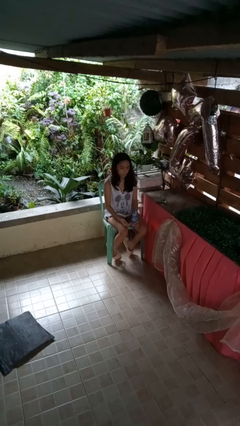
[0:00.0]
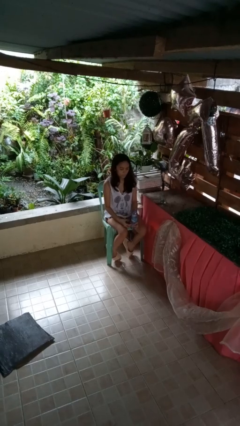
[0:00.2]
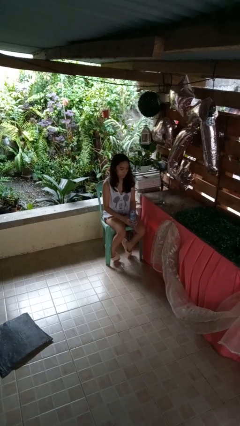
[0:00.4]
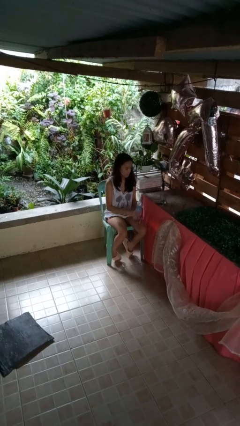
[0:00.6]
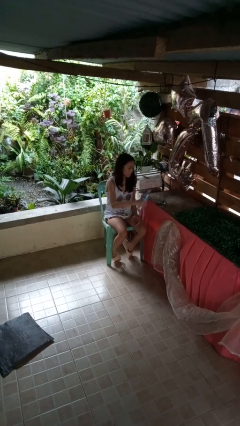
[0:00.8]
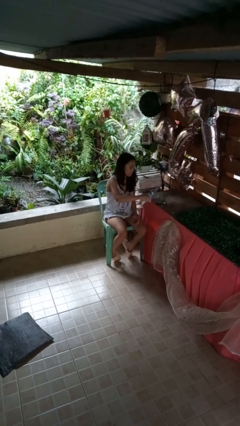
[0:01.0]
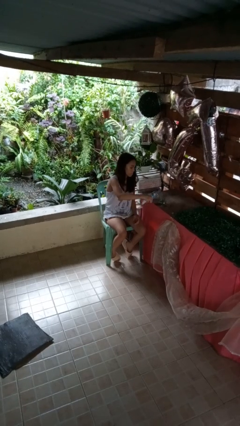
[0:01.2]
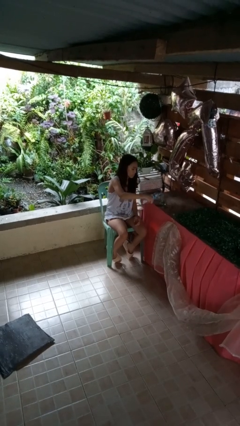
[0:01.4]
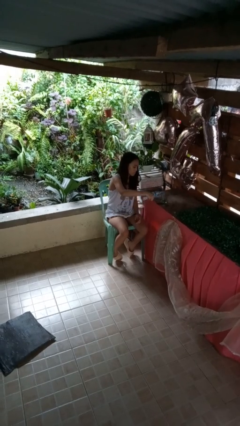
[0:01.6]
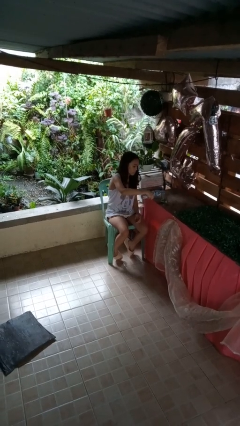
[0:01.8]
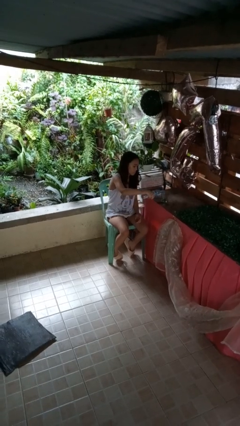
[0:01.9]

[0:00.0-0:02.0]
person pours liquid into cup

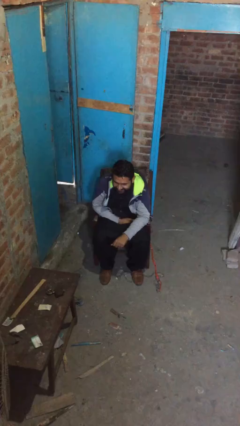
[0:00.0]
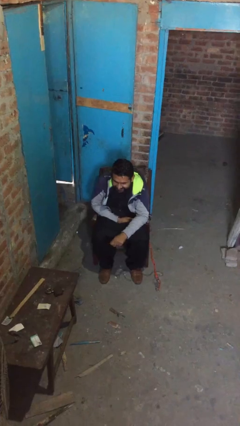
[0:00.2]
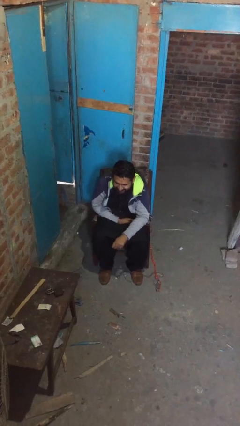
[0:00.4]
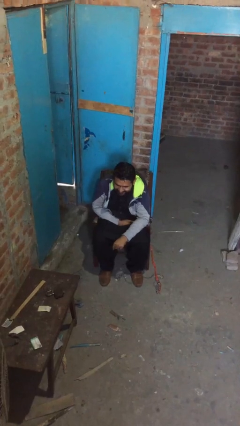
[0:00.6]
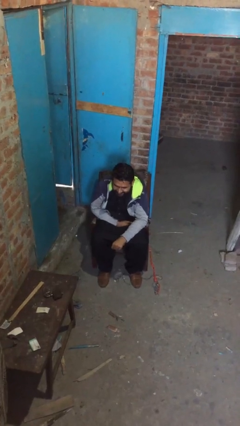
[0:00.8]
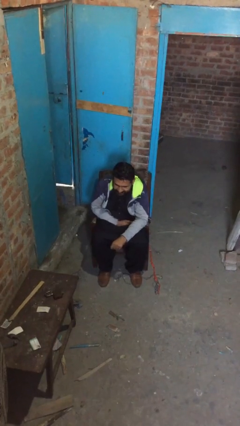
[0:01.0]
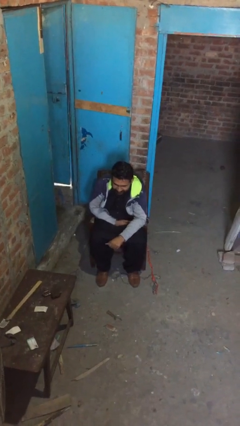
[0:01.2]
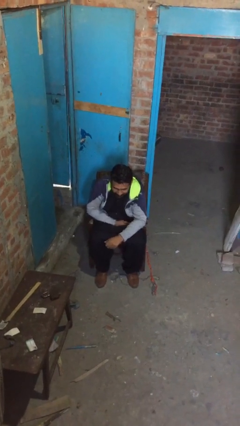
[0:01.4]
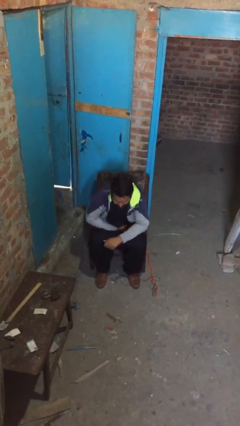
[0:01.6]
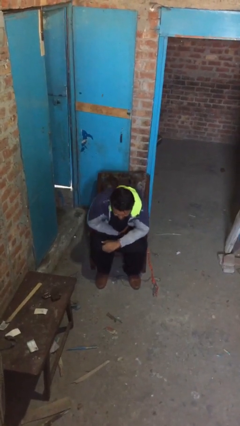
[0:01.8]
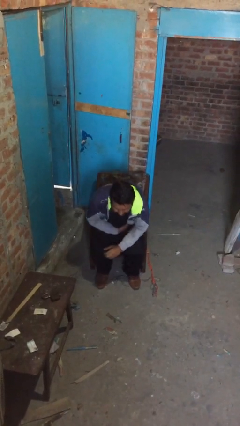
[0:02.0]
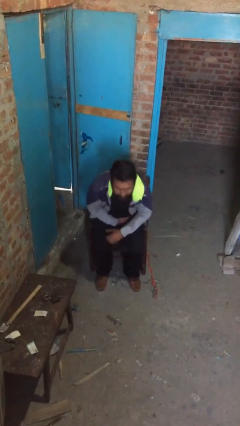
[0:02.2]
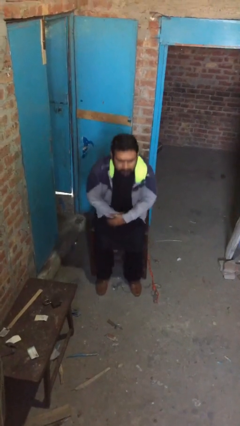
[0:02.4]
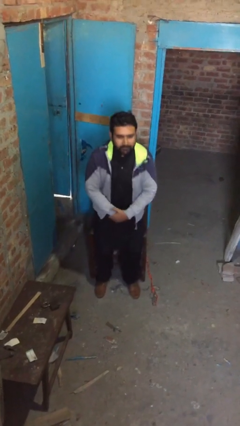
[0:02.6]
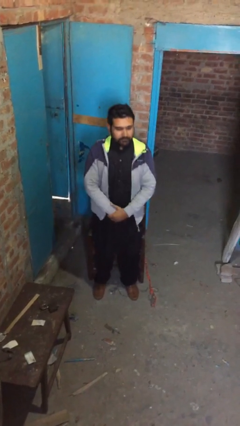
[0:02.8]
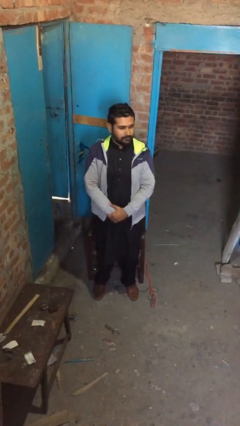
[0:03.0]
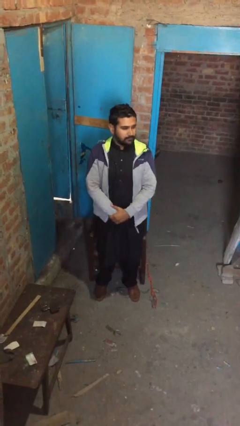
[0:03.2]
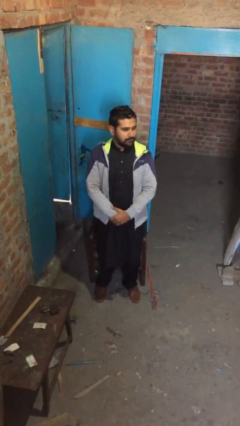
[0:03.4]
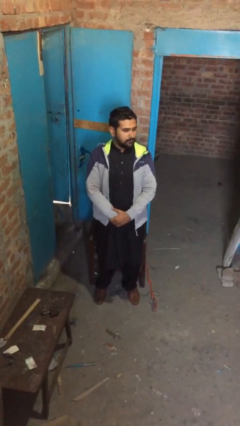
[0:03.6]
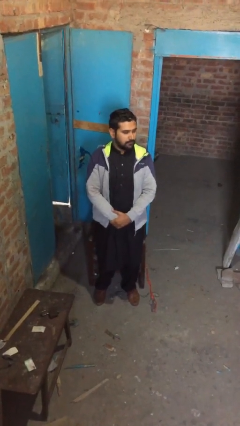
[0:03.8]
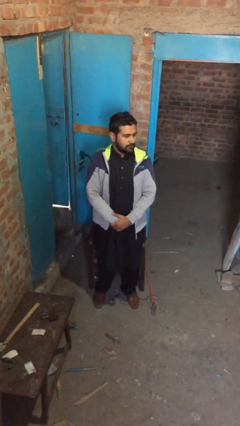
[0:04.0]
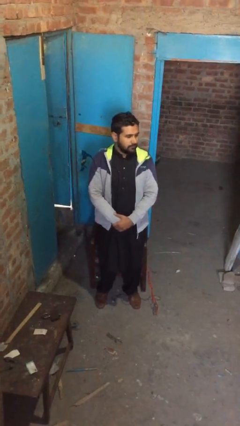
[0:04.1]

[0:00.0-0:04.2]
person stands up

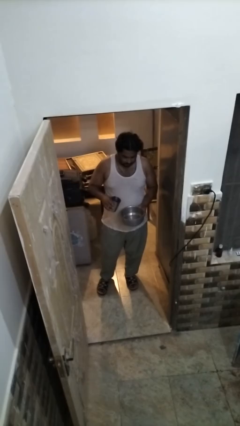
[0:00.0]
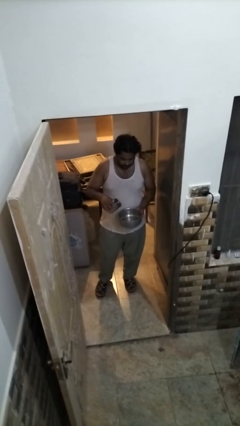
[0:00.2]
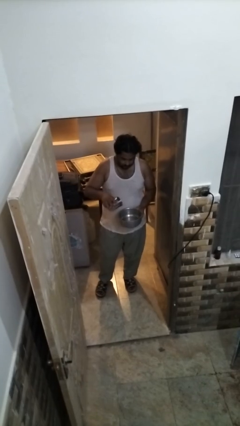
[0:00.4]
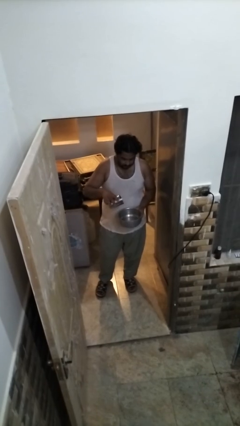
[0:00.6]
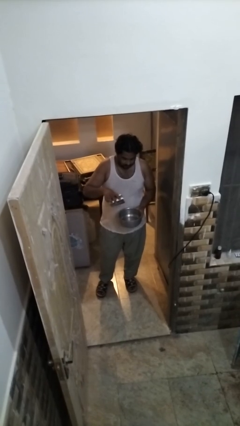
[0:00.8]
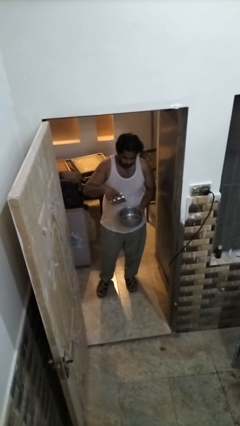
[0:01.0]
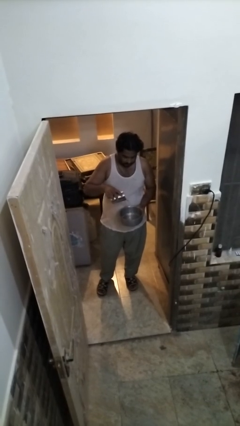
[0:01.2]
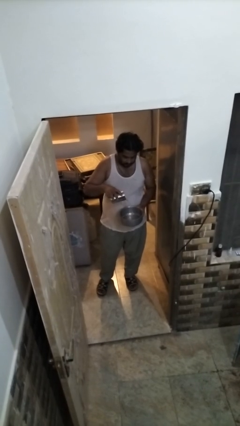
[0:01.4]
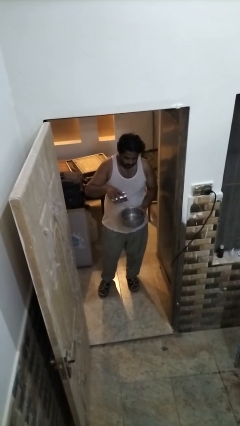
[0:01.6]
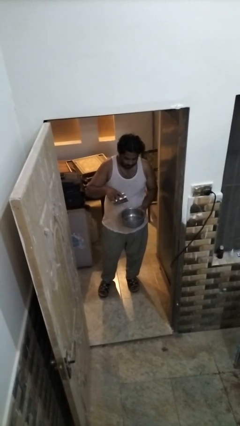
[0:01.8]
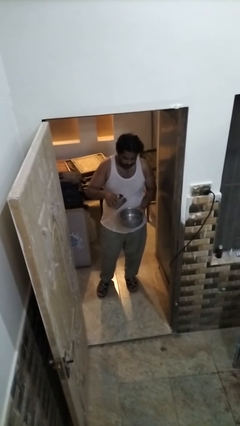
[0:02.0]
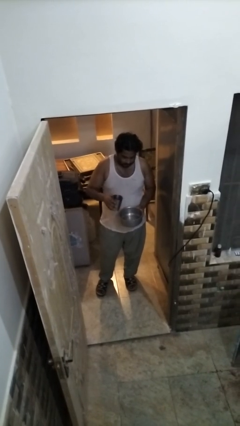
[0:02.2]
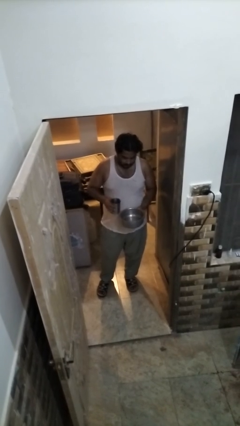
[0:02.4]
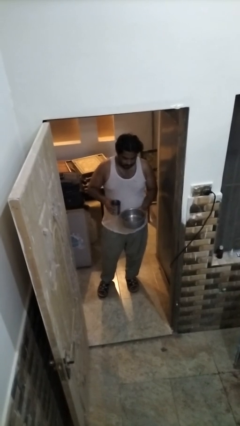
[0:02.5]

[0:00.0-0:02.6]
person pours into bowl

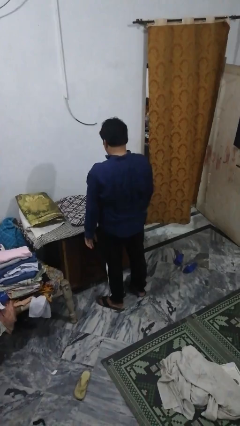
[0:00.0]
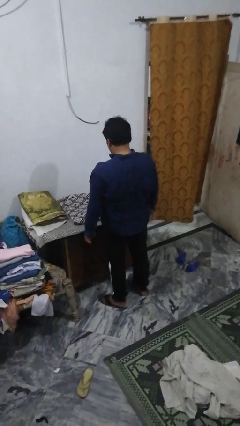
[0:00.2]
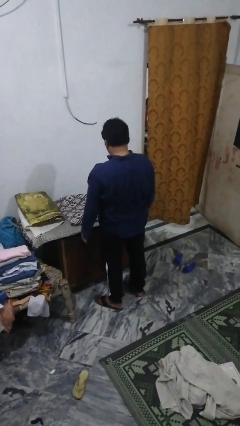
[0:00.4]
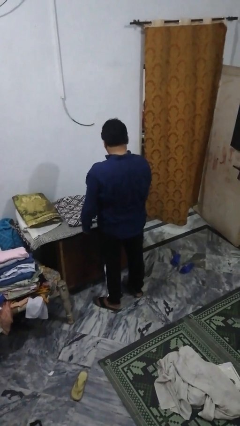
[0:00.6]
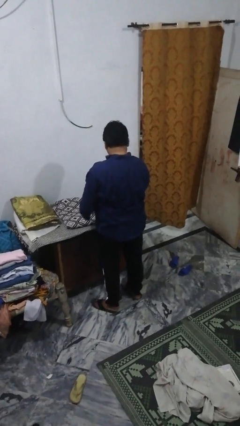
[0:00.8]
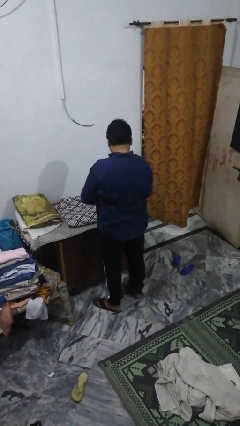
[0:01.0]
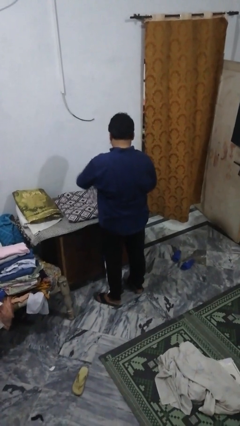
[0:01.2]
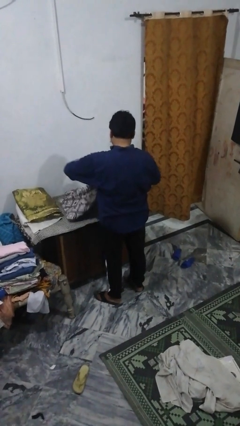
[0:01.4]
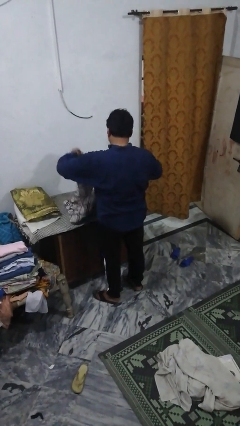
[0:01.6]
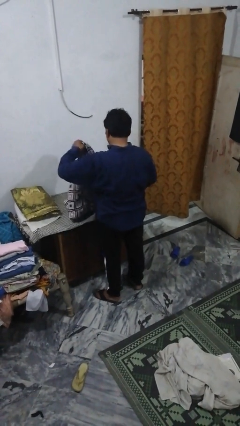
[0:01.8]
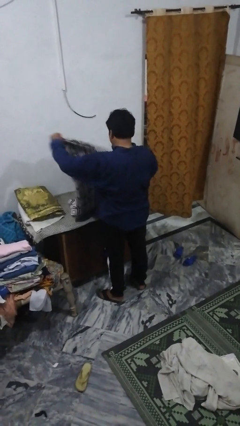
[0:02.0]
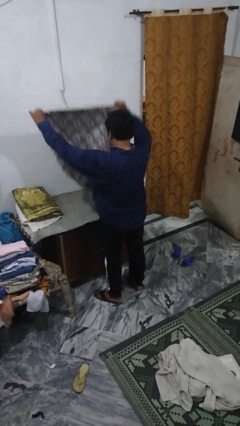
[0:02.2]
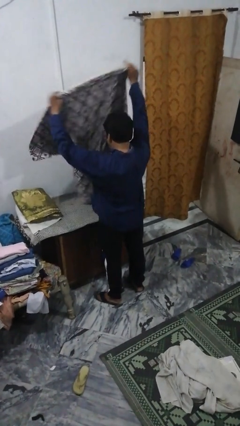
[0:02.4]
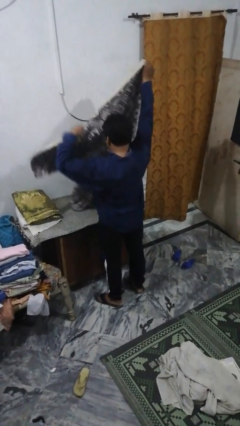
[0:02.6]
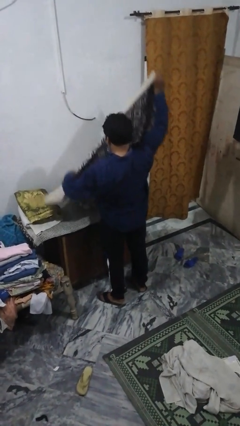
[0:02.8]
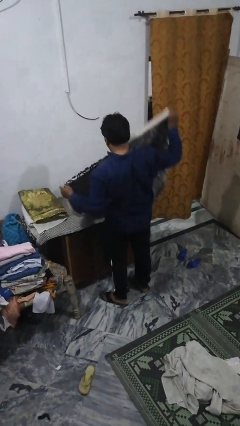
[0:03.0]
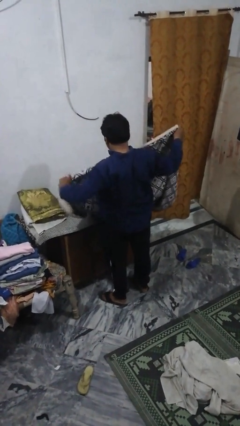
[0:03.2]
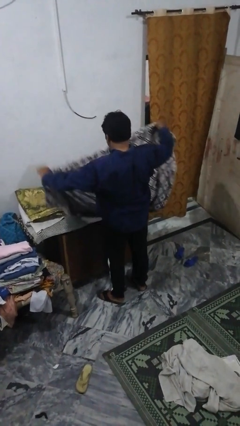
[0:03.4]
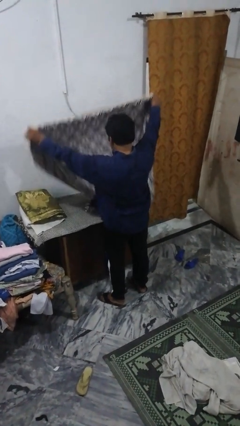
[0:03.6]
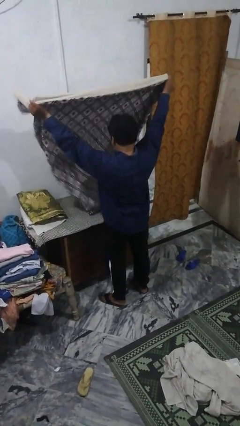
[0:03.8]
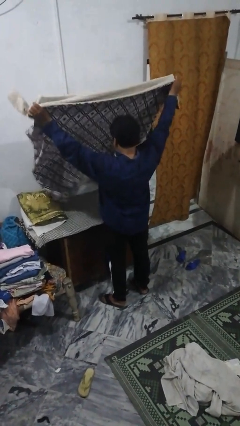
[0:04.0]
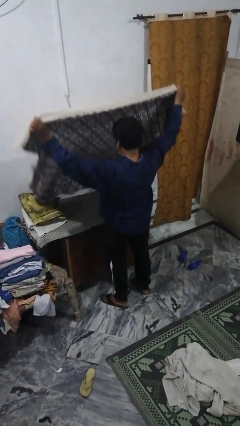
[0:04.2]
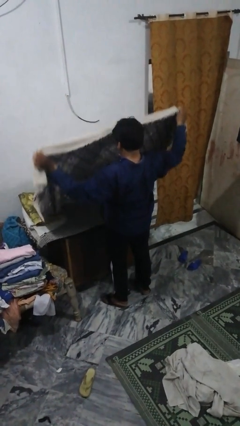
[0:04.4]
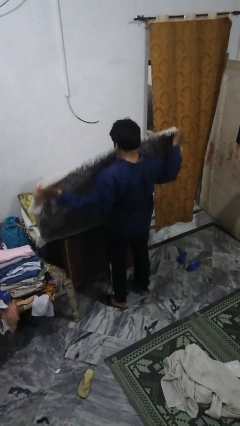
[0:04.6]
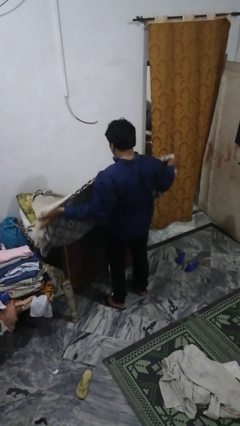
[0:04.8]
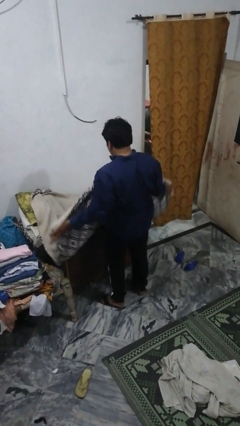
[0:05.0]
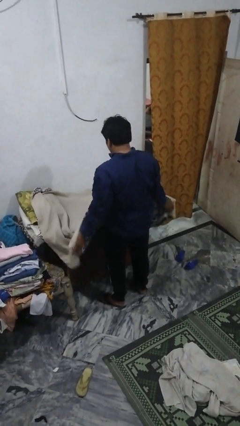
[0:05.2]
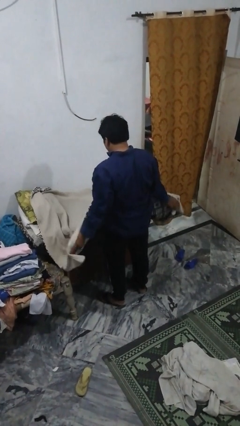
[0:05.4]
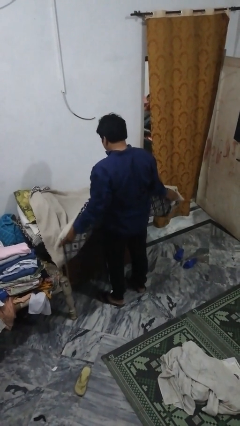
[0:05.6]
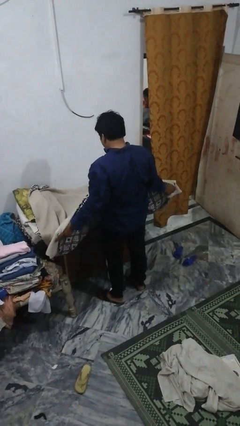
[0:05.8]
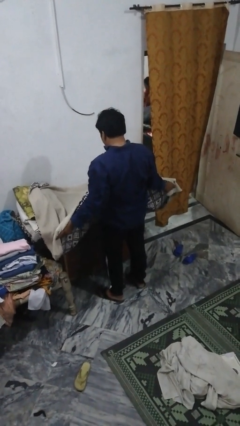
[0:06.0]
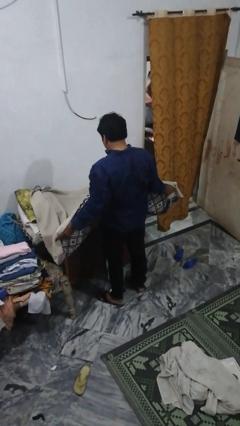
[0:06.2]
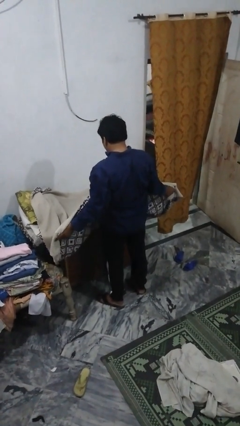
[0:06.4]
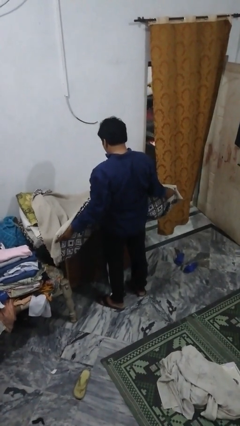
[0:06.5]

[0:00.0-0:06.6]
person unfolds blanket

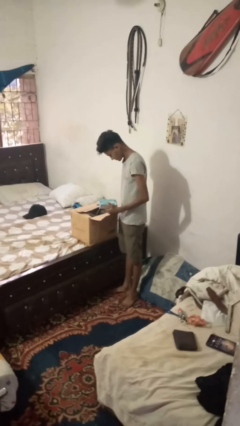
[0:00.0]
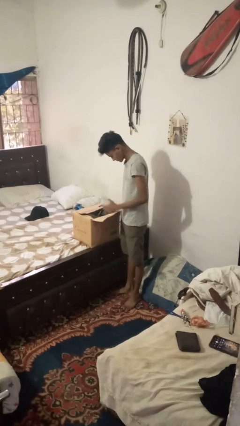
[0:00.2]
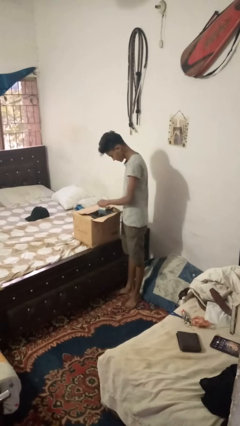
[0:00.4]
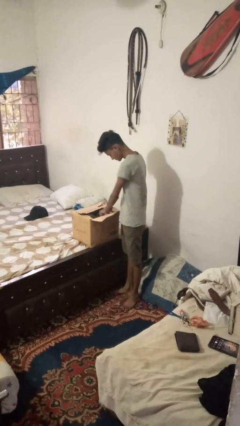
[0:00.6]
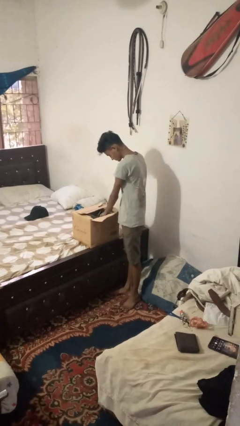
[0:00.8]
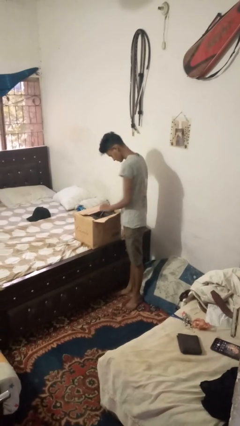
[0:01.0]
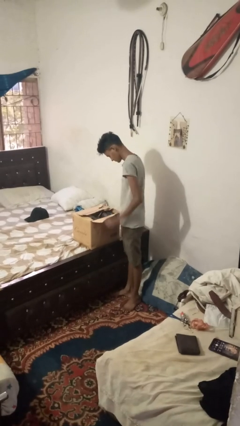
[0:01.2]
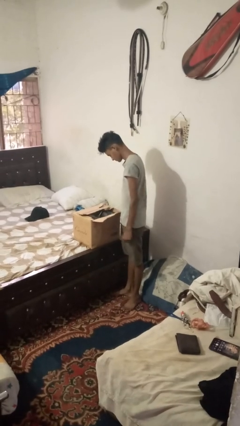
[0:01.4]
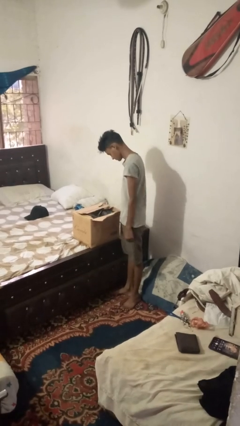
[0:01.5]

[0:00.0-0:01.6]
person puts object into box

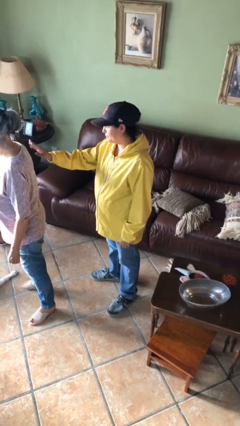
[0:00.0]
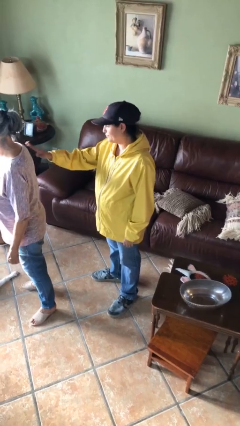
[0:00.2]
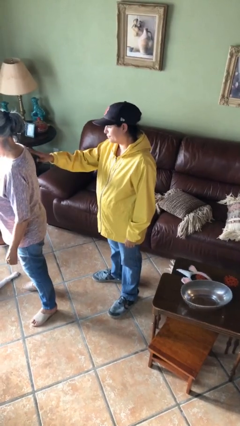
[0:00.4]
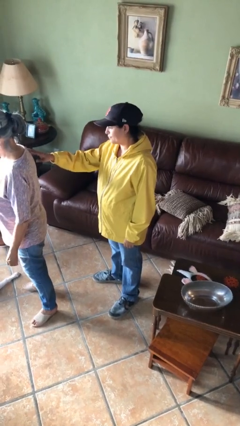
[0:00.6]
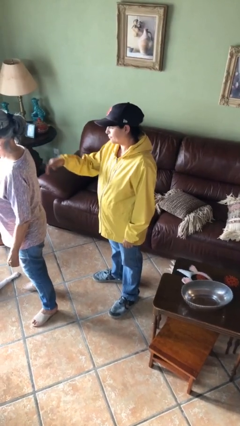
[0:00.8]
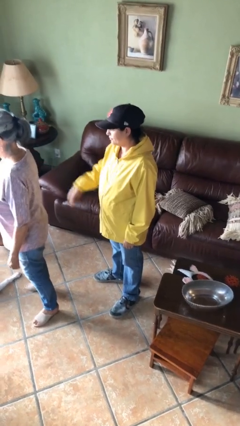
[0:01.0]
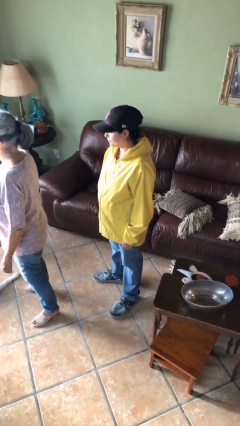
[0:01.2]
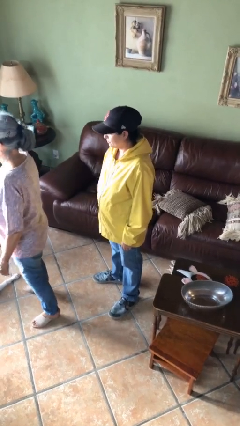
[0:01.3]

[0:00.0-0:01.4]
person touches back of person
